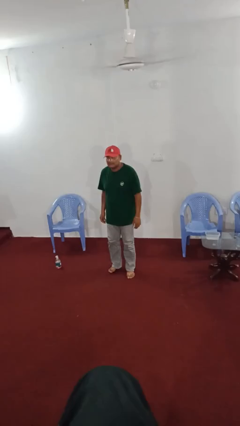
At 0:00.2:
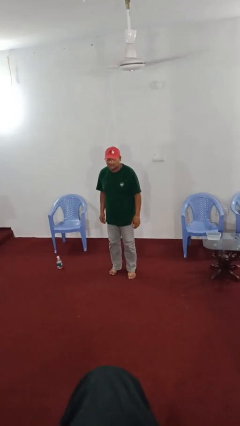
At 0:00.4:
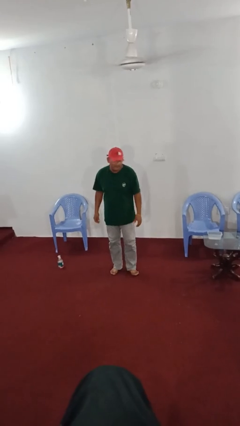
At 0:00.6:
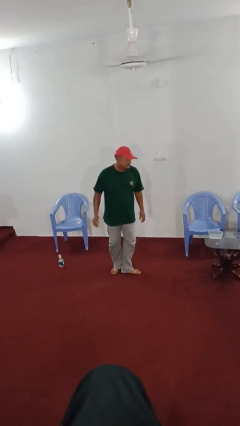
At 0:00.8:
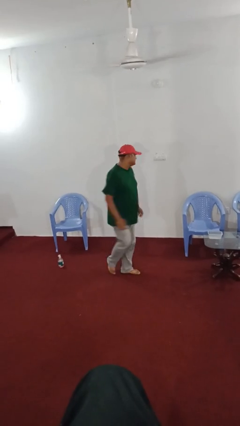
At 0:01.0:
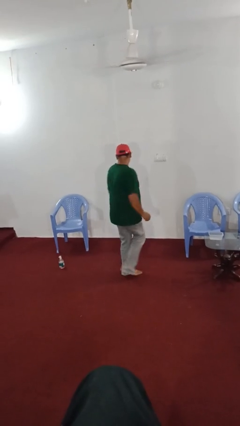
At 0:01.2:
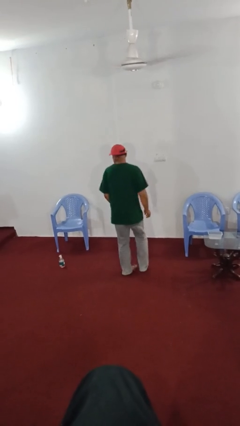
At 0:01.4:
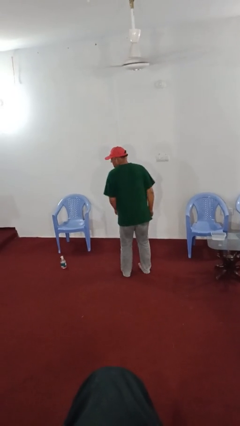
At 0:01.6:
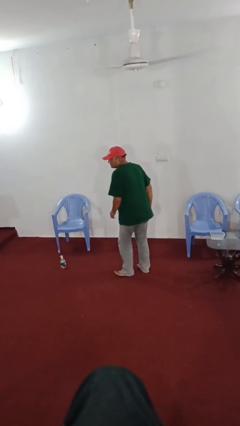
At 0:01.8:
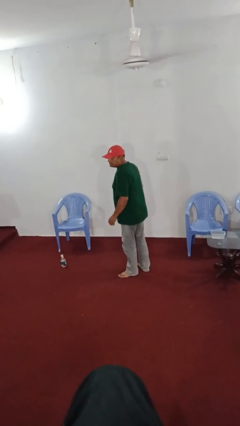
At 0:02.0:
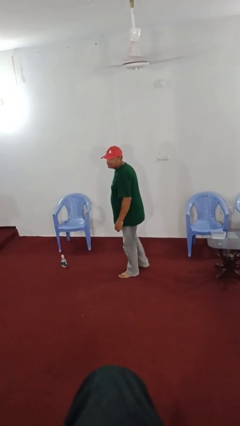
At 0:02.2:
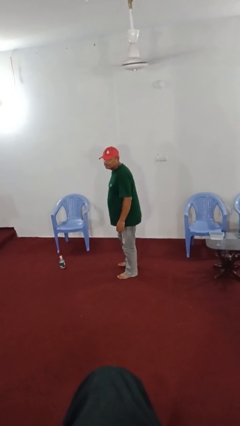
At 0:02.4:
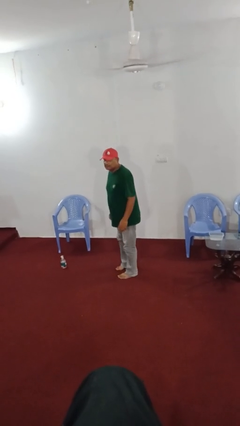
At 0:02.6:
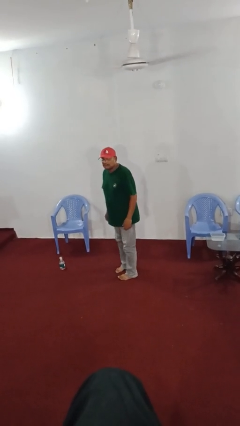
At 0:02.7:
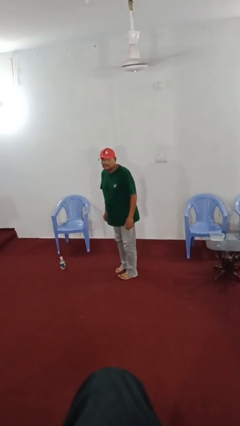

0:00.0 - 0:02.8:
person twirls

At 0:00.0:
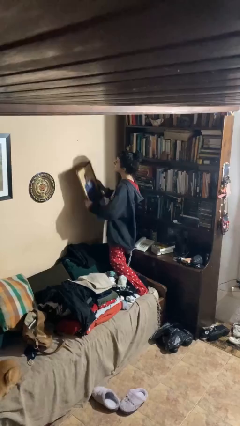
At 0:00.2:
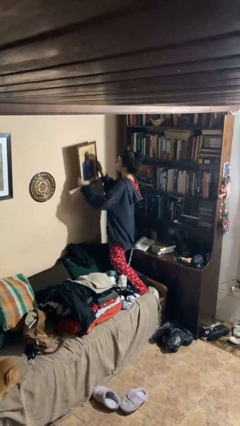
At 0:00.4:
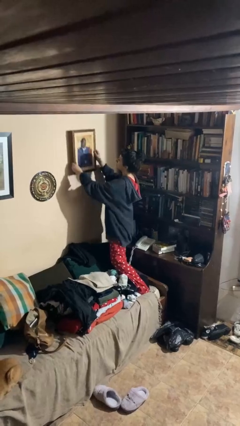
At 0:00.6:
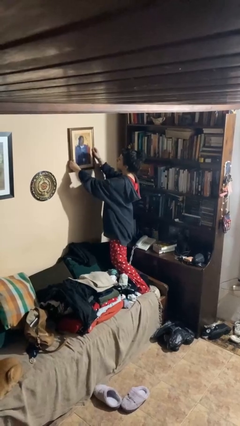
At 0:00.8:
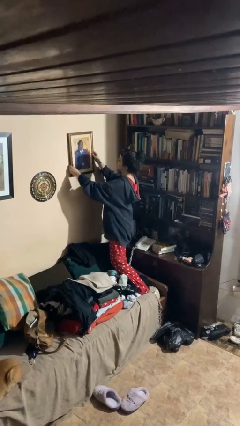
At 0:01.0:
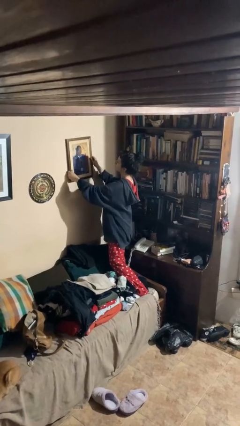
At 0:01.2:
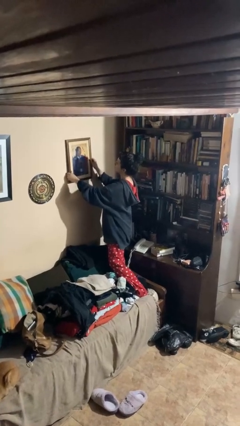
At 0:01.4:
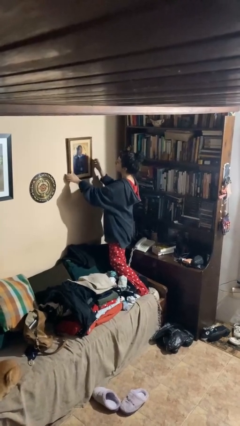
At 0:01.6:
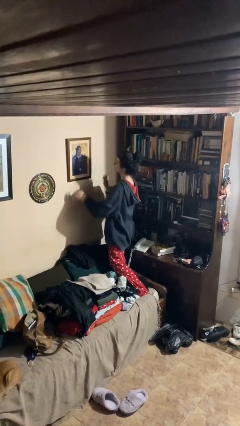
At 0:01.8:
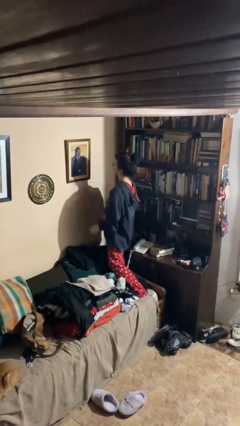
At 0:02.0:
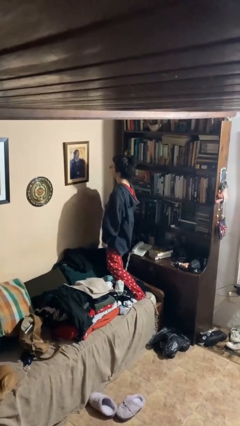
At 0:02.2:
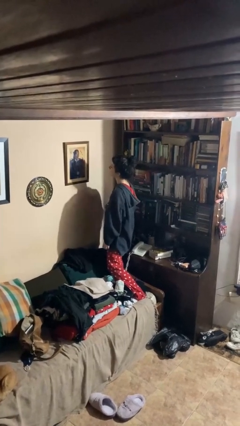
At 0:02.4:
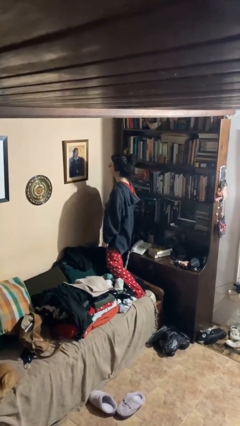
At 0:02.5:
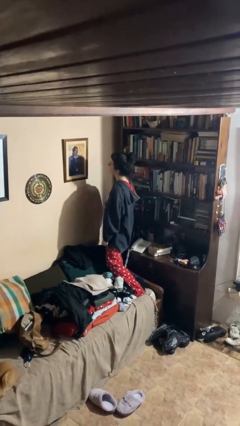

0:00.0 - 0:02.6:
person puts up picture frame

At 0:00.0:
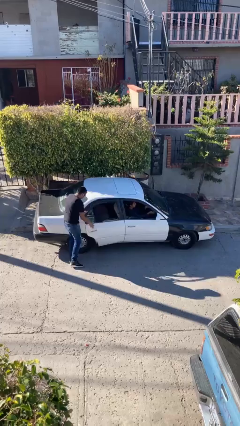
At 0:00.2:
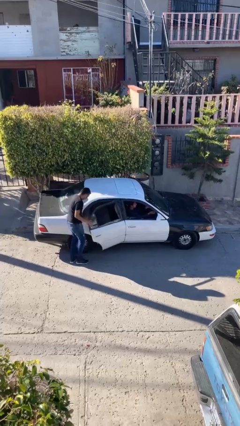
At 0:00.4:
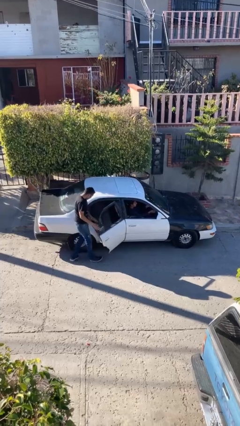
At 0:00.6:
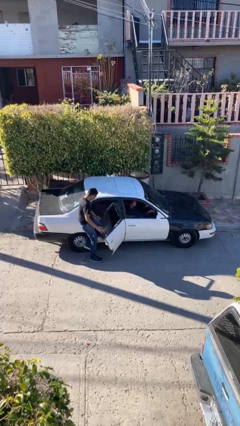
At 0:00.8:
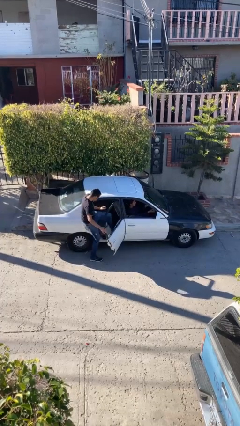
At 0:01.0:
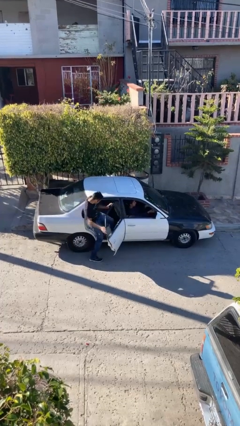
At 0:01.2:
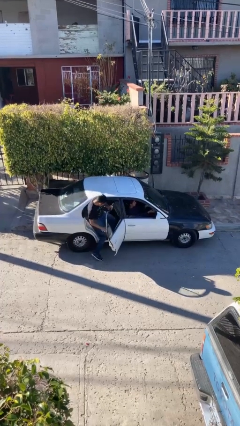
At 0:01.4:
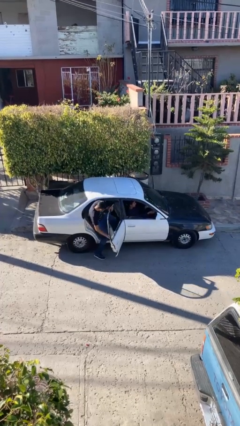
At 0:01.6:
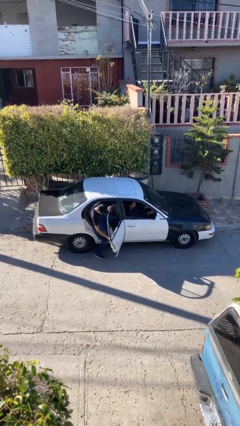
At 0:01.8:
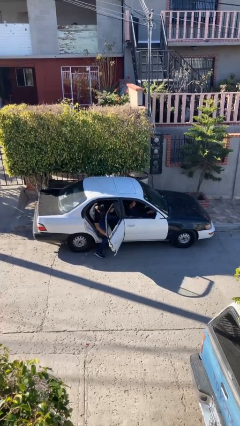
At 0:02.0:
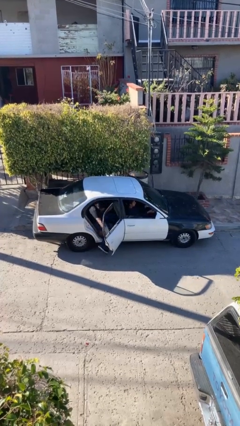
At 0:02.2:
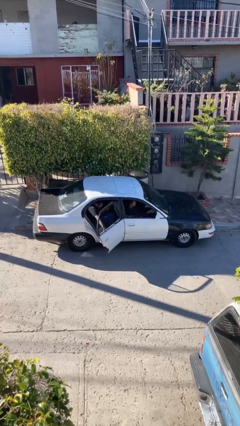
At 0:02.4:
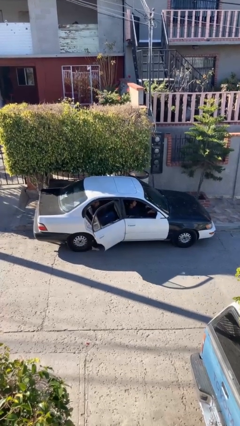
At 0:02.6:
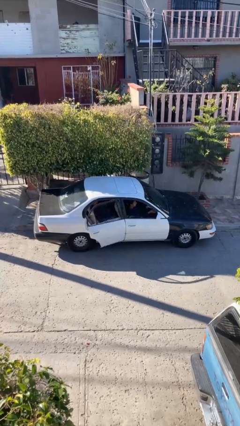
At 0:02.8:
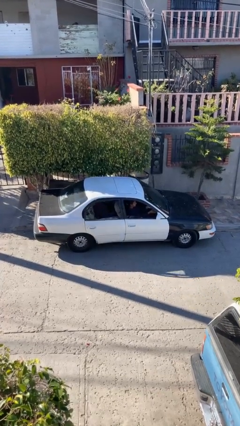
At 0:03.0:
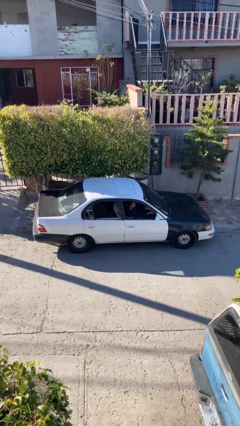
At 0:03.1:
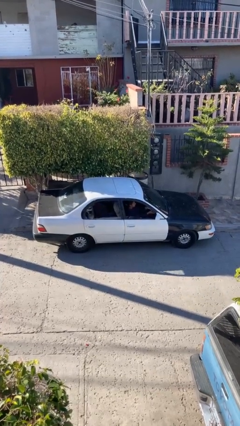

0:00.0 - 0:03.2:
car picks up person

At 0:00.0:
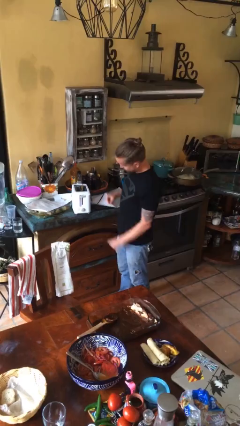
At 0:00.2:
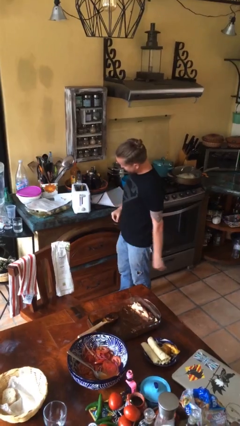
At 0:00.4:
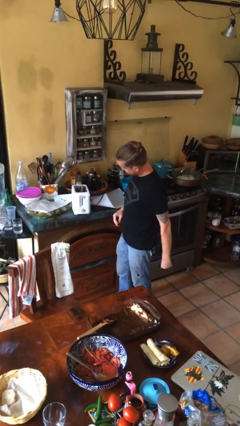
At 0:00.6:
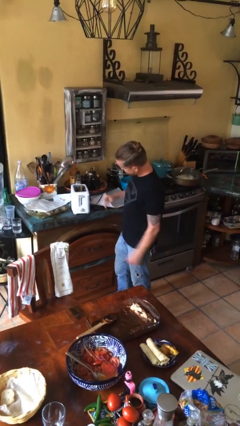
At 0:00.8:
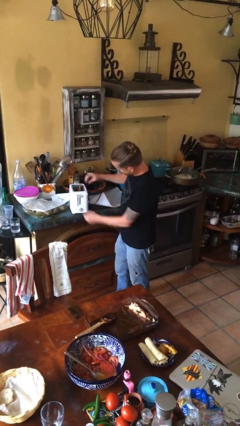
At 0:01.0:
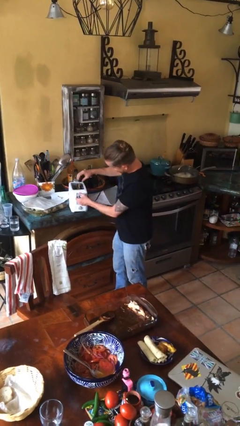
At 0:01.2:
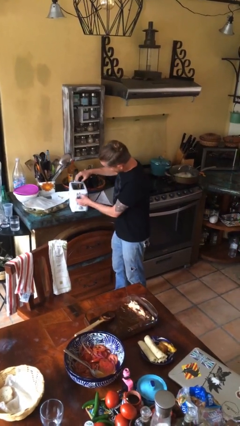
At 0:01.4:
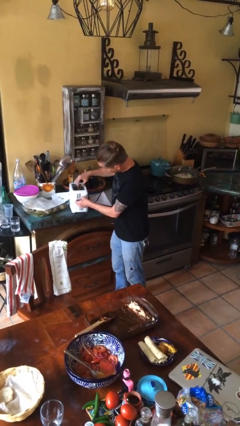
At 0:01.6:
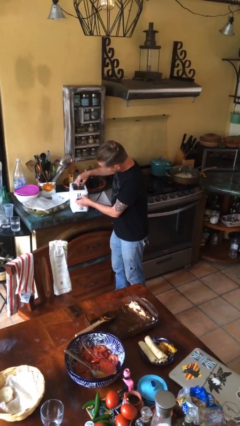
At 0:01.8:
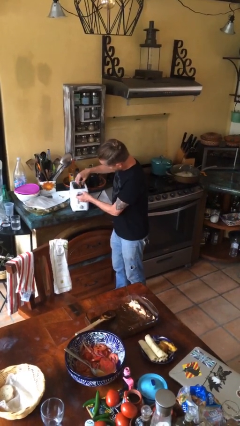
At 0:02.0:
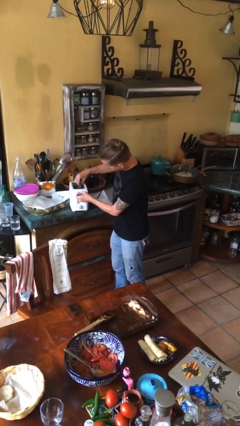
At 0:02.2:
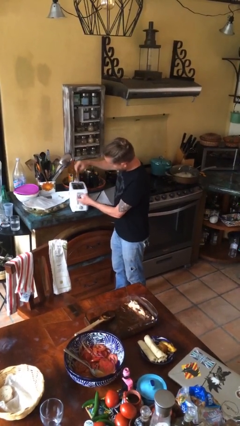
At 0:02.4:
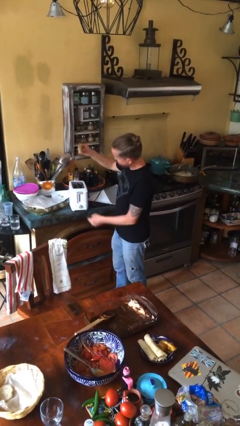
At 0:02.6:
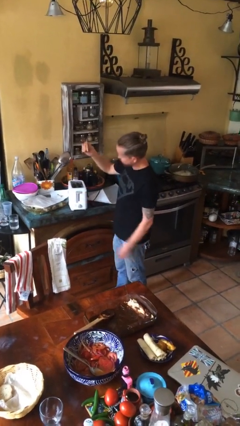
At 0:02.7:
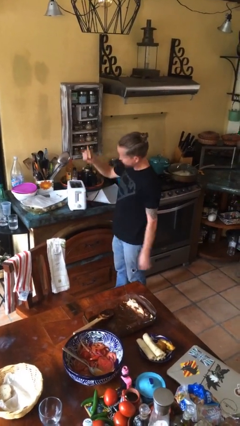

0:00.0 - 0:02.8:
person takes object from toaster

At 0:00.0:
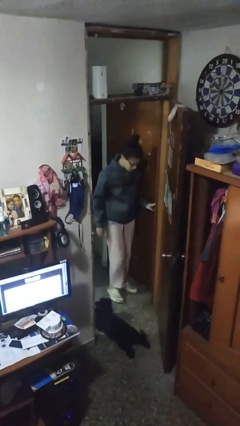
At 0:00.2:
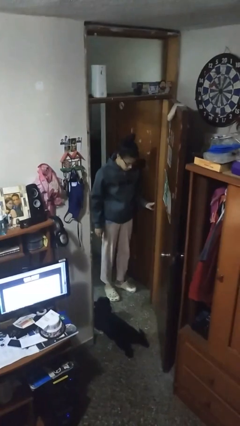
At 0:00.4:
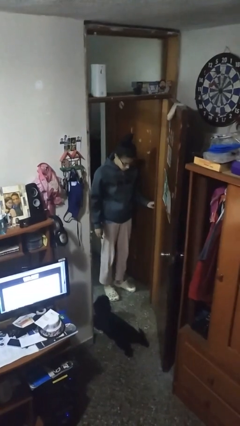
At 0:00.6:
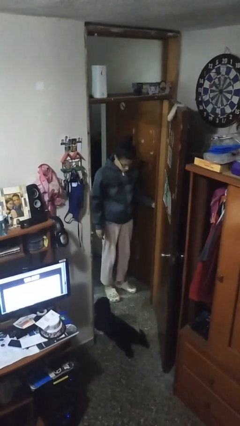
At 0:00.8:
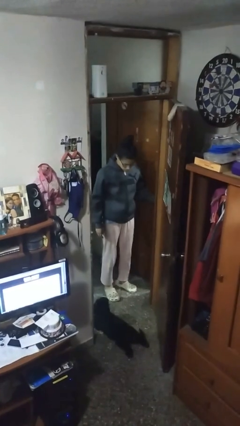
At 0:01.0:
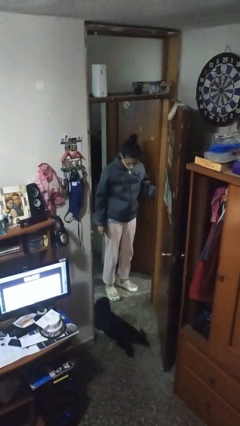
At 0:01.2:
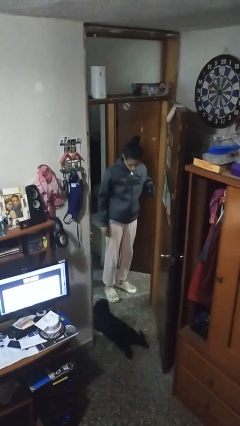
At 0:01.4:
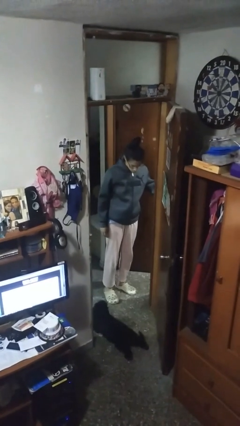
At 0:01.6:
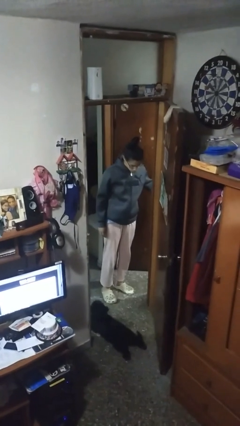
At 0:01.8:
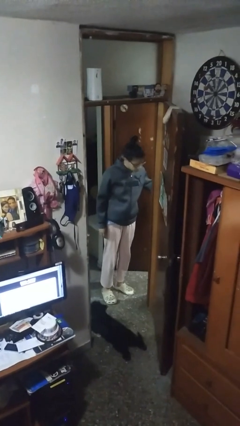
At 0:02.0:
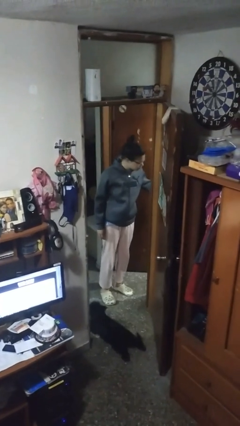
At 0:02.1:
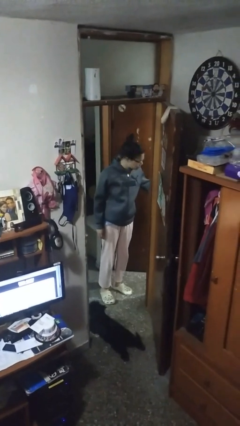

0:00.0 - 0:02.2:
person opens facility door

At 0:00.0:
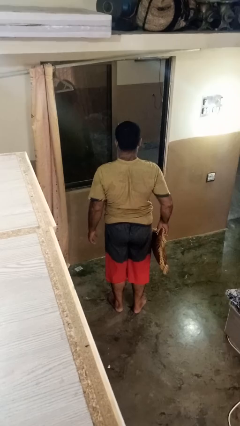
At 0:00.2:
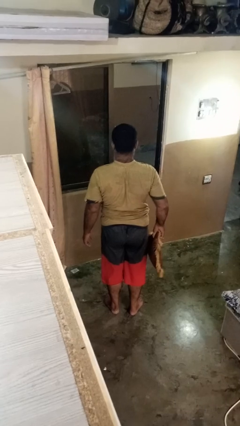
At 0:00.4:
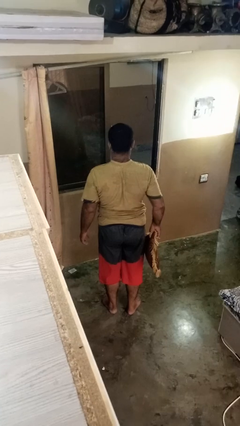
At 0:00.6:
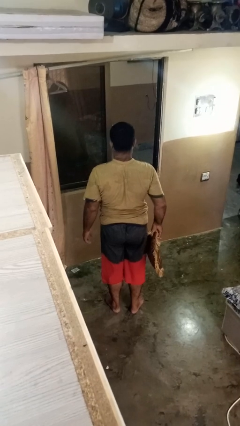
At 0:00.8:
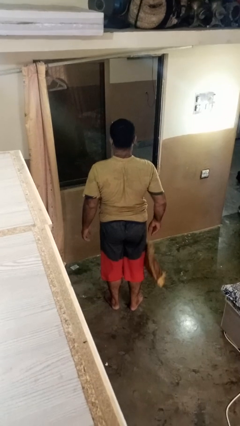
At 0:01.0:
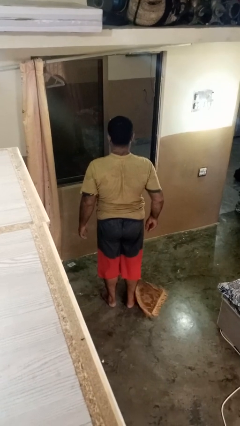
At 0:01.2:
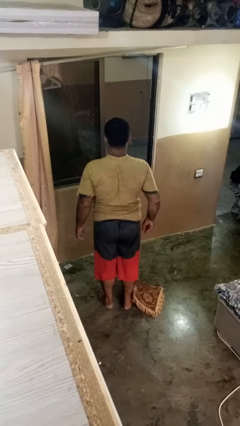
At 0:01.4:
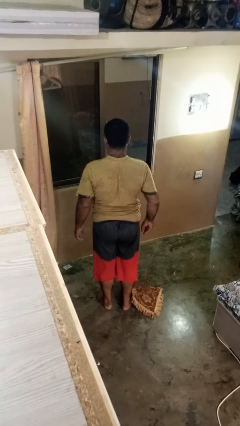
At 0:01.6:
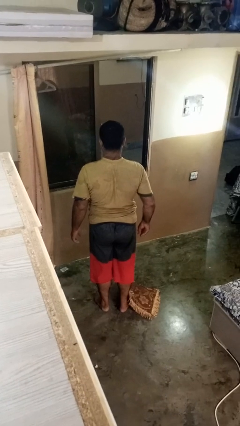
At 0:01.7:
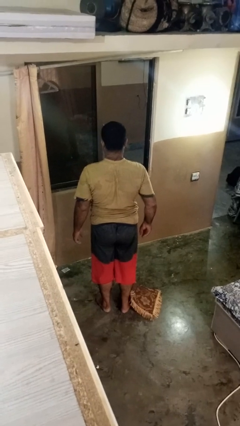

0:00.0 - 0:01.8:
person drops object

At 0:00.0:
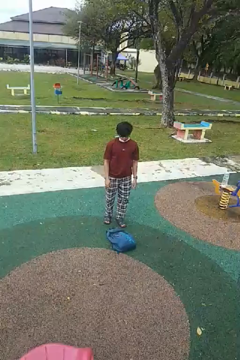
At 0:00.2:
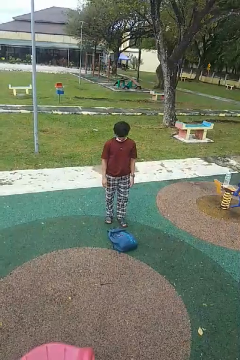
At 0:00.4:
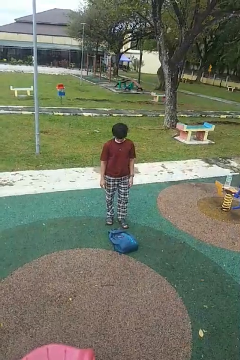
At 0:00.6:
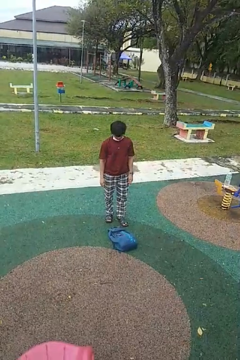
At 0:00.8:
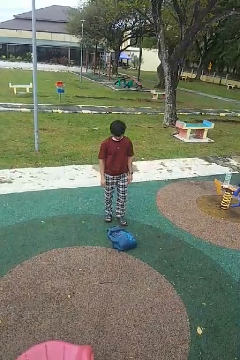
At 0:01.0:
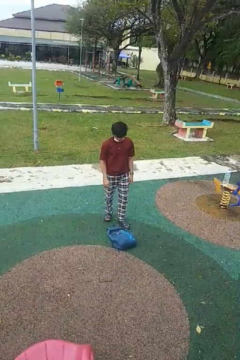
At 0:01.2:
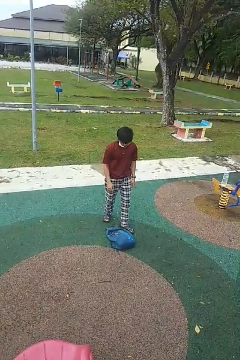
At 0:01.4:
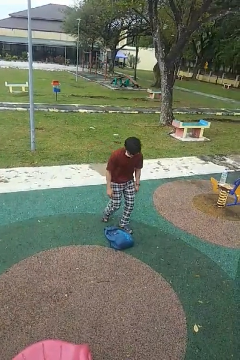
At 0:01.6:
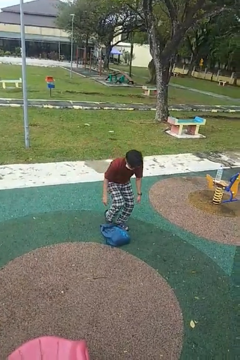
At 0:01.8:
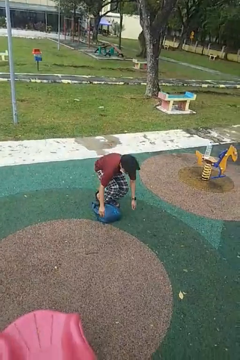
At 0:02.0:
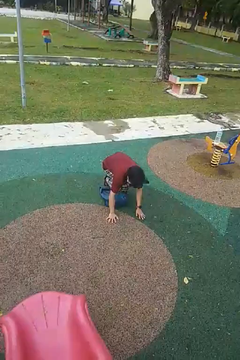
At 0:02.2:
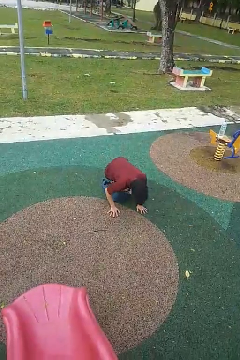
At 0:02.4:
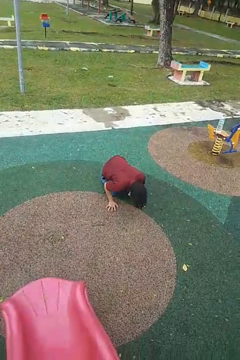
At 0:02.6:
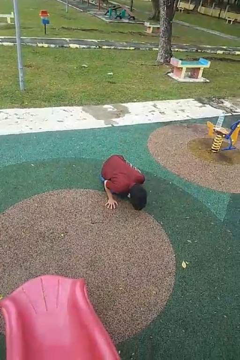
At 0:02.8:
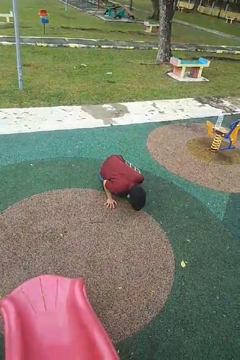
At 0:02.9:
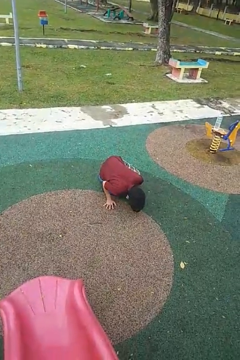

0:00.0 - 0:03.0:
person trips on object on floor
